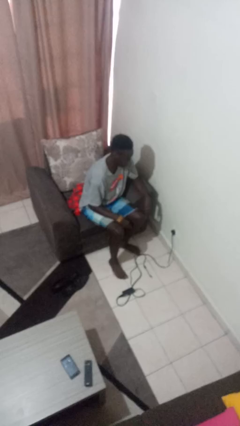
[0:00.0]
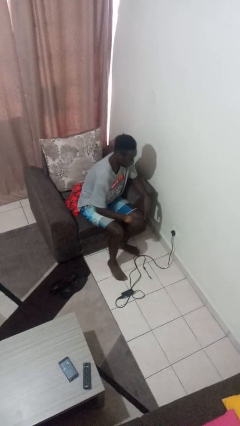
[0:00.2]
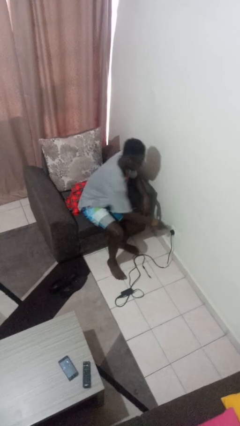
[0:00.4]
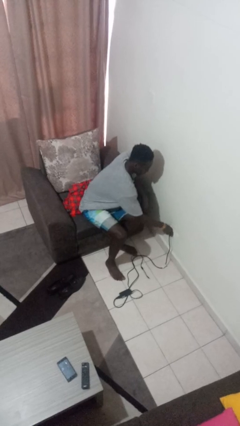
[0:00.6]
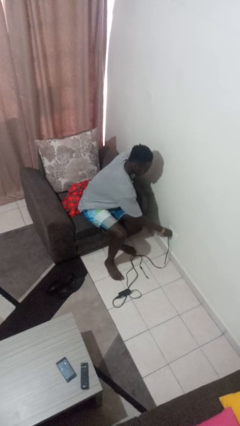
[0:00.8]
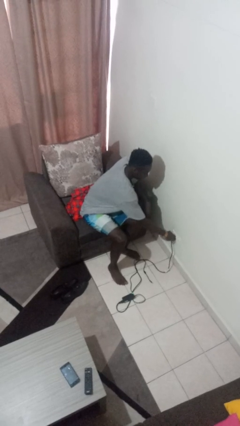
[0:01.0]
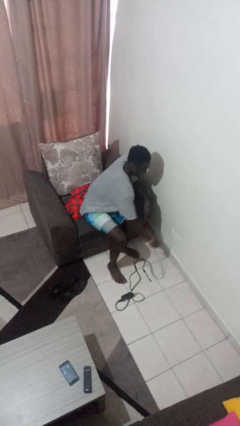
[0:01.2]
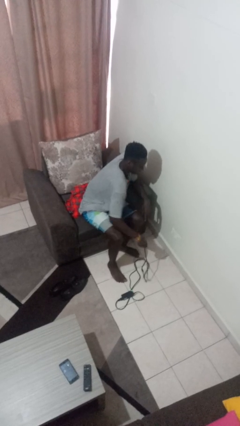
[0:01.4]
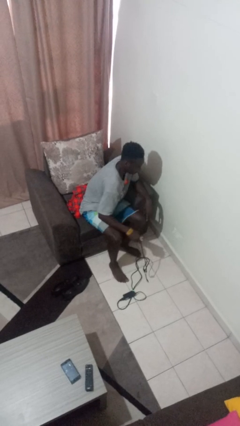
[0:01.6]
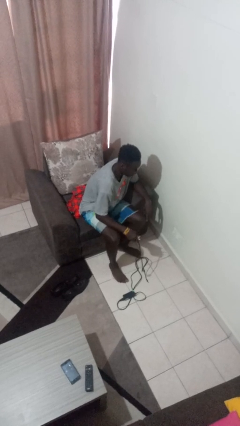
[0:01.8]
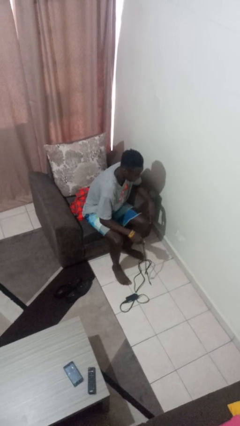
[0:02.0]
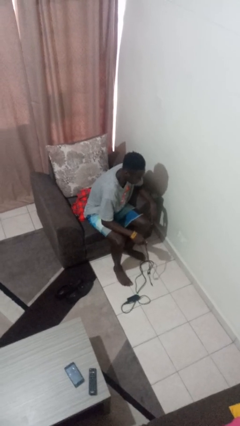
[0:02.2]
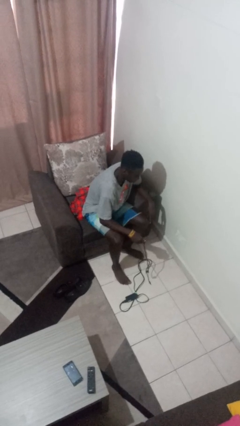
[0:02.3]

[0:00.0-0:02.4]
person unplugs from electrical socket

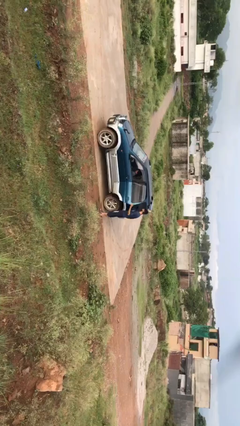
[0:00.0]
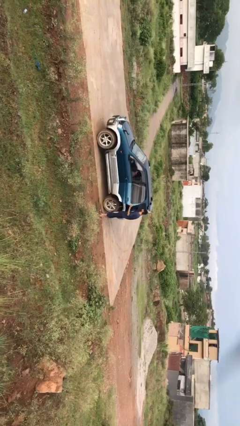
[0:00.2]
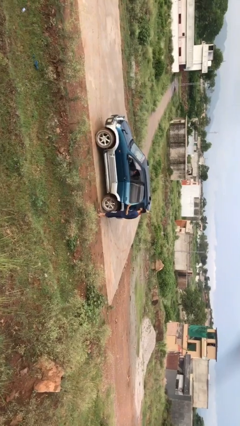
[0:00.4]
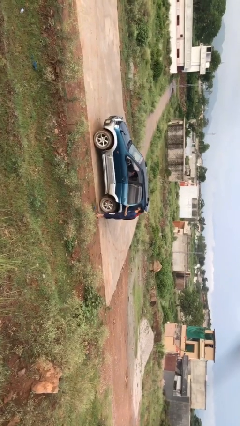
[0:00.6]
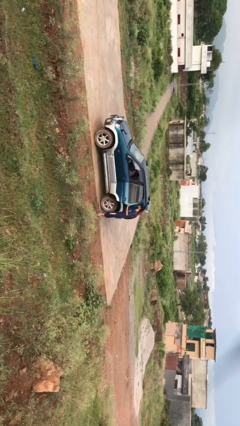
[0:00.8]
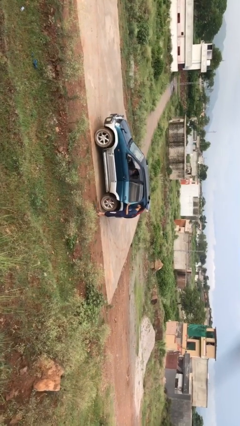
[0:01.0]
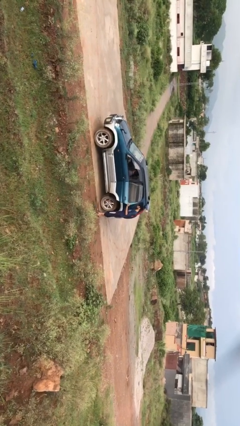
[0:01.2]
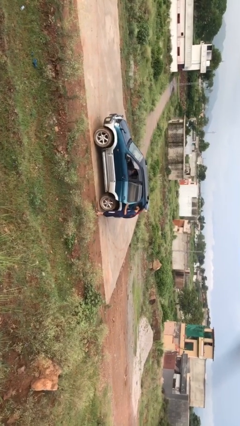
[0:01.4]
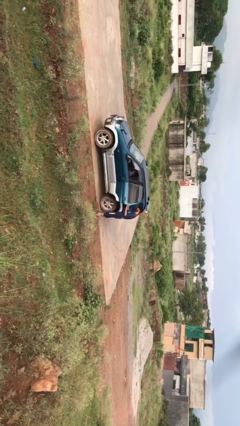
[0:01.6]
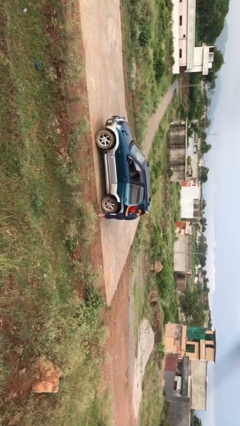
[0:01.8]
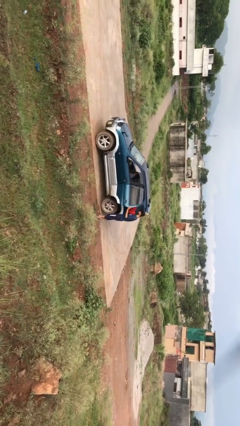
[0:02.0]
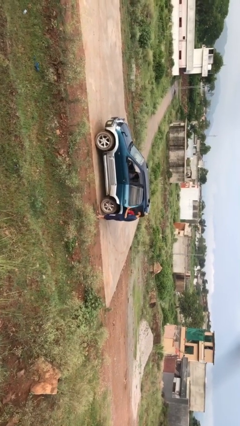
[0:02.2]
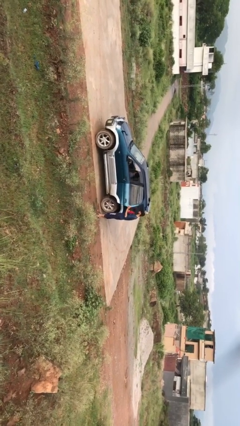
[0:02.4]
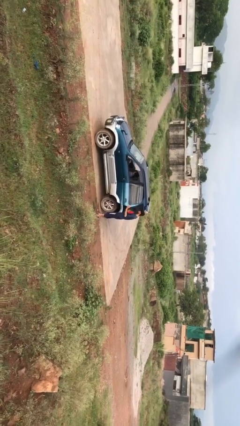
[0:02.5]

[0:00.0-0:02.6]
person unloads car

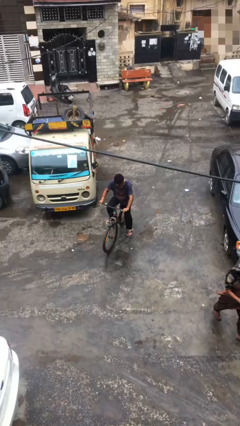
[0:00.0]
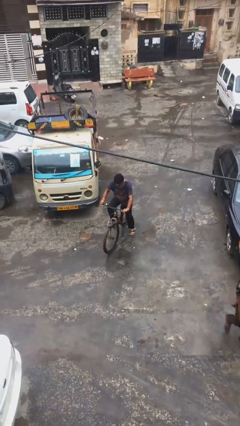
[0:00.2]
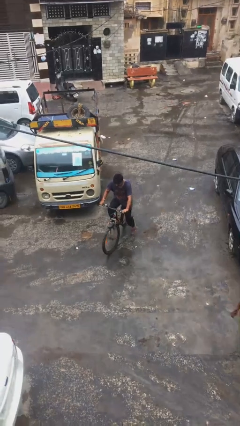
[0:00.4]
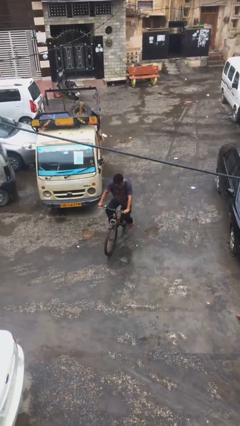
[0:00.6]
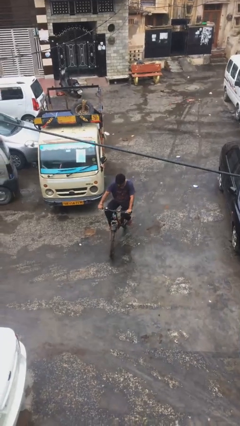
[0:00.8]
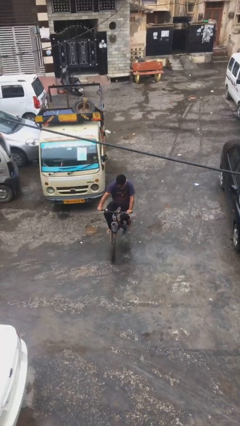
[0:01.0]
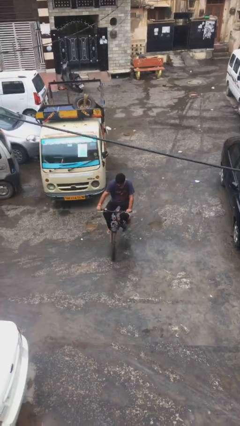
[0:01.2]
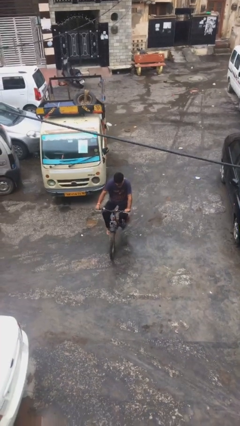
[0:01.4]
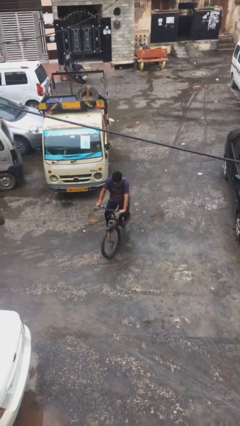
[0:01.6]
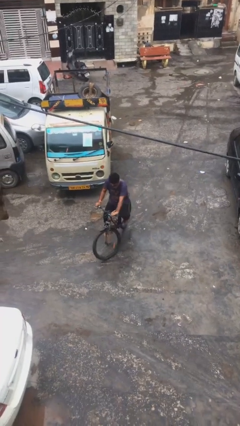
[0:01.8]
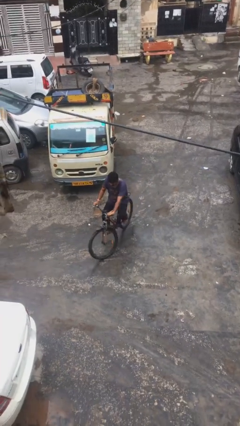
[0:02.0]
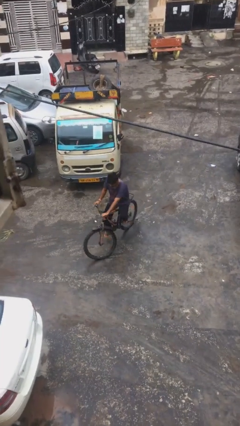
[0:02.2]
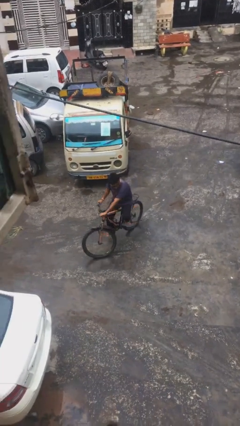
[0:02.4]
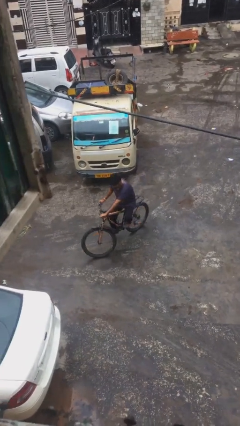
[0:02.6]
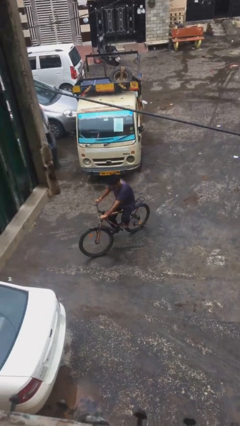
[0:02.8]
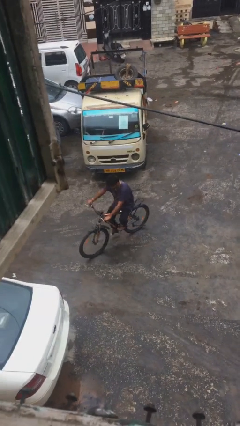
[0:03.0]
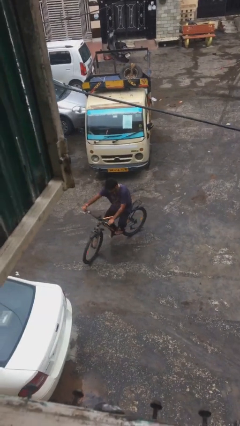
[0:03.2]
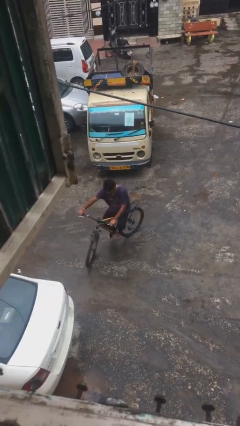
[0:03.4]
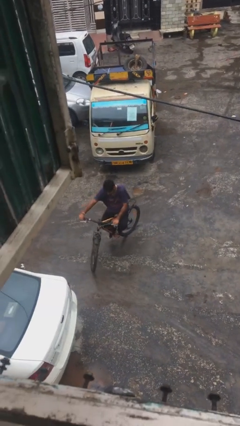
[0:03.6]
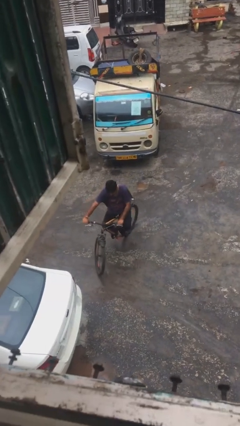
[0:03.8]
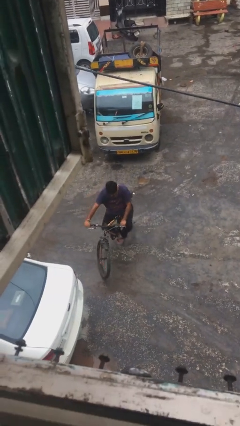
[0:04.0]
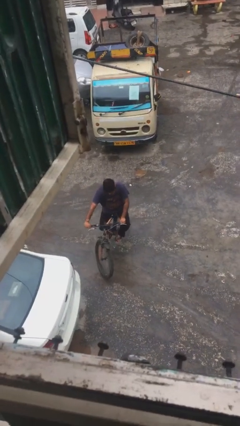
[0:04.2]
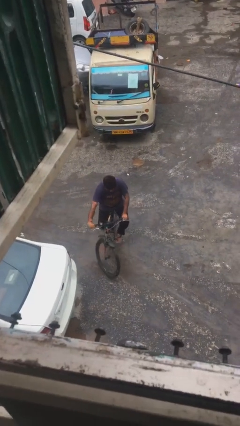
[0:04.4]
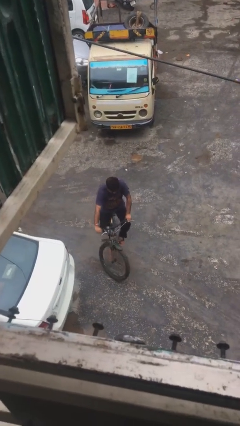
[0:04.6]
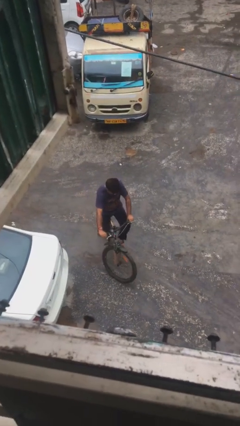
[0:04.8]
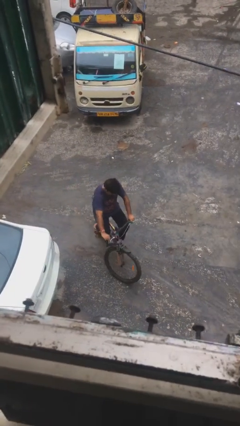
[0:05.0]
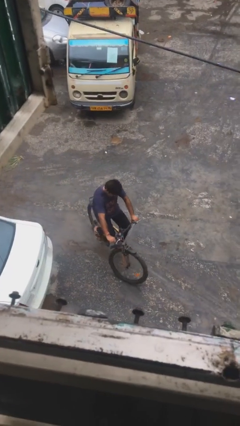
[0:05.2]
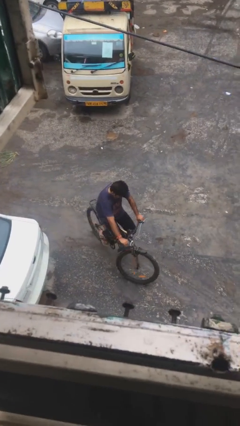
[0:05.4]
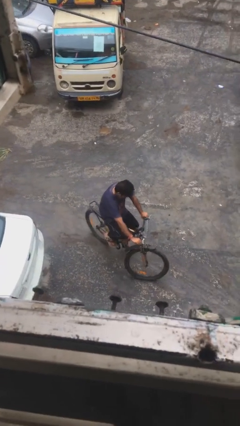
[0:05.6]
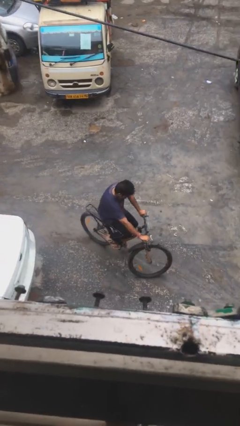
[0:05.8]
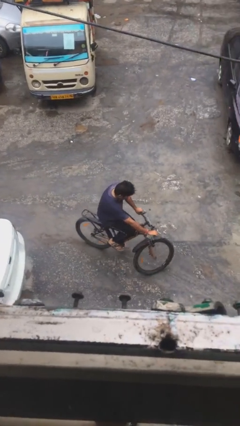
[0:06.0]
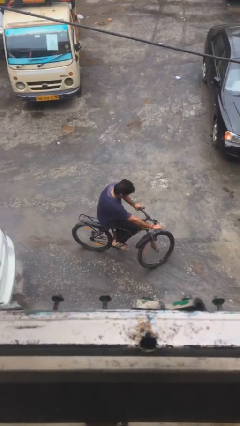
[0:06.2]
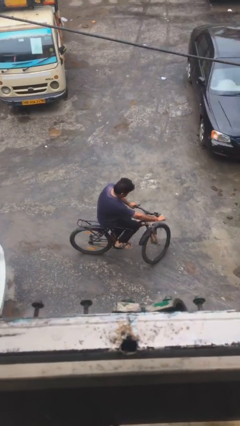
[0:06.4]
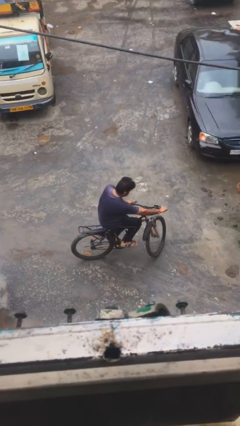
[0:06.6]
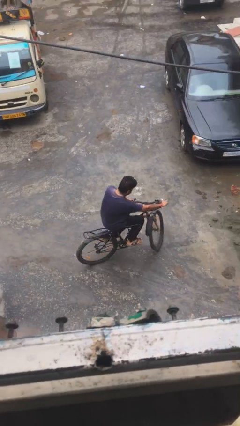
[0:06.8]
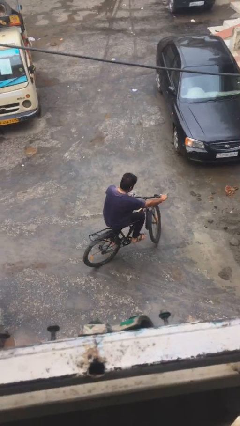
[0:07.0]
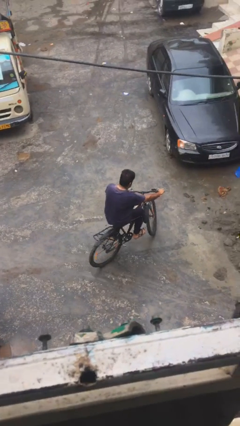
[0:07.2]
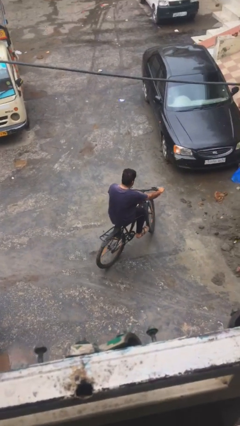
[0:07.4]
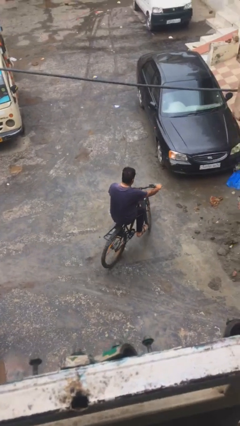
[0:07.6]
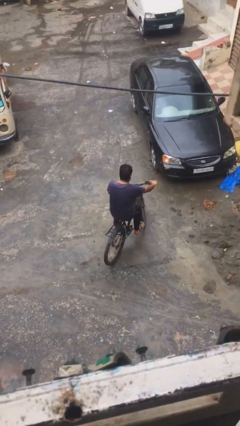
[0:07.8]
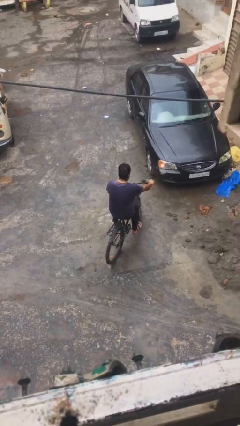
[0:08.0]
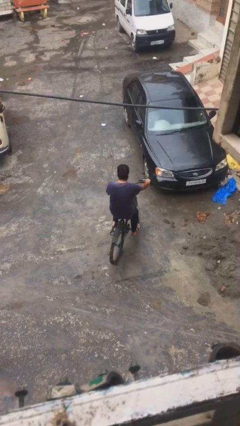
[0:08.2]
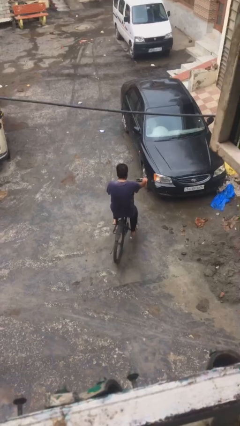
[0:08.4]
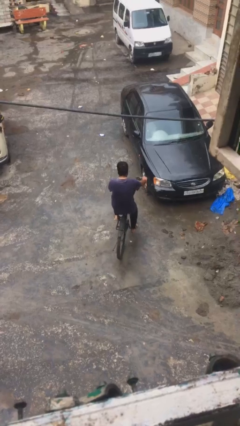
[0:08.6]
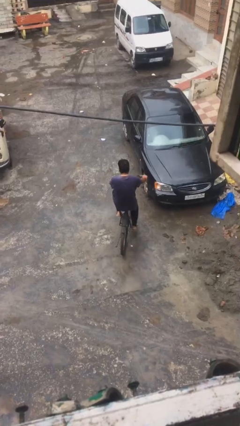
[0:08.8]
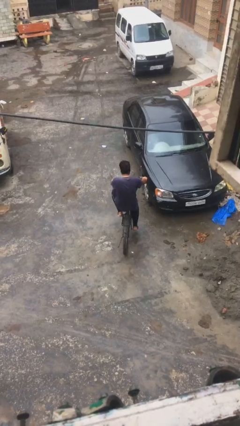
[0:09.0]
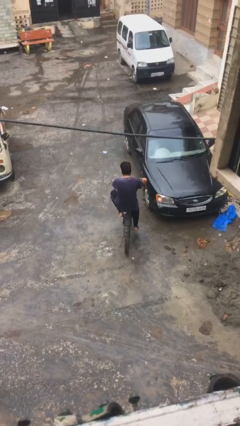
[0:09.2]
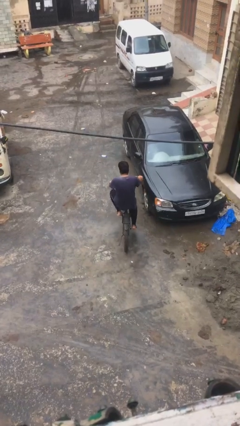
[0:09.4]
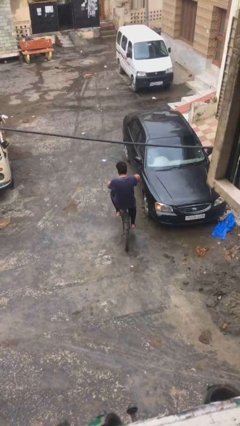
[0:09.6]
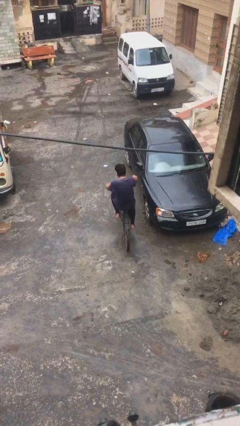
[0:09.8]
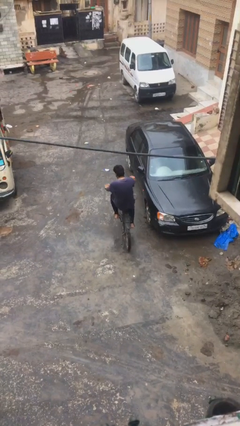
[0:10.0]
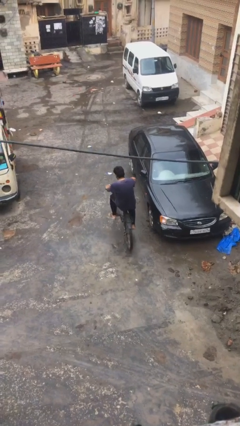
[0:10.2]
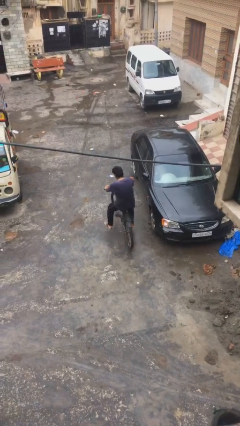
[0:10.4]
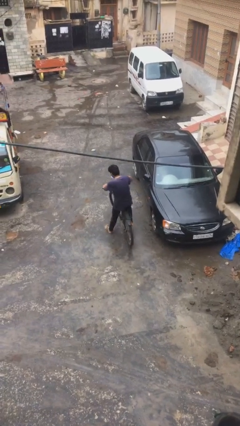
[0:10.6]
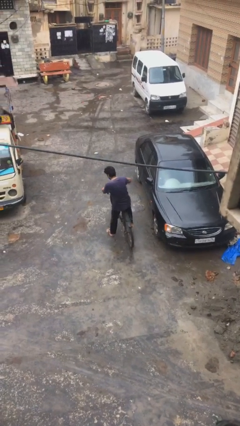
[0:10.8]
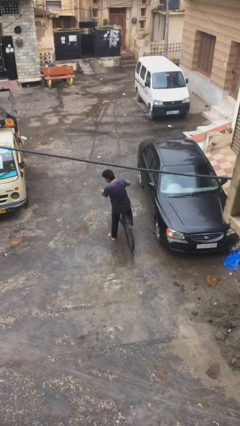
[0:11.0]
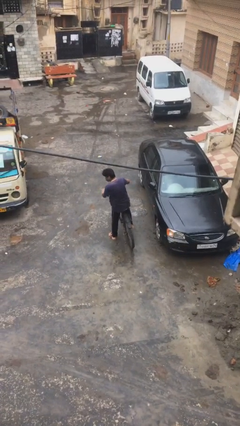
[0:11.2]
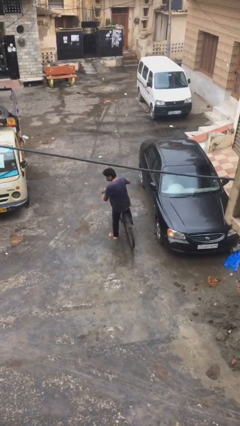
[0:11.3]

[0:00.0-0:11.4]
person rides bicycle

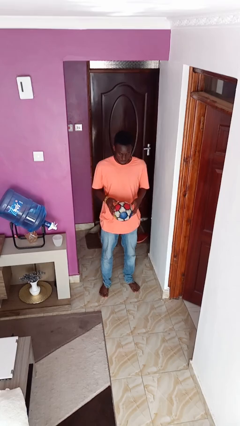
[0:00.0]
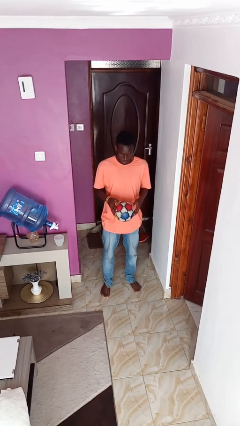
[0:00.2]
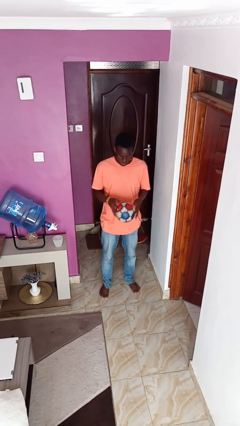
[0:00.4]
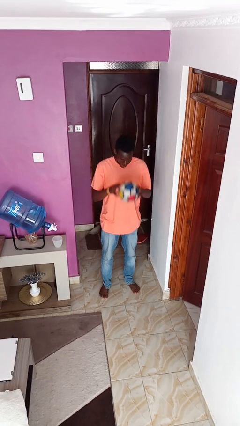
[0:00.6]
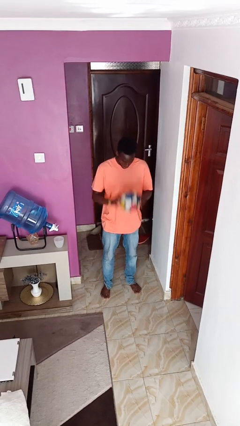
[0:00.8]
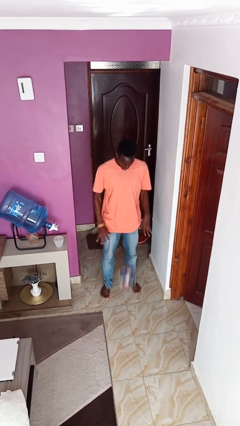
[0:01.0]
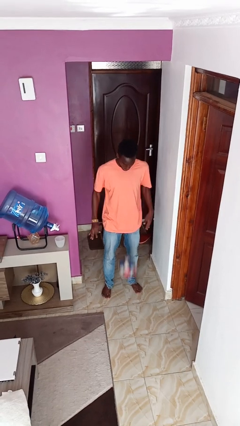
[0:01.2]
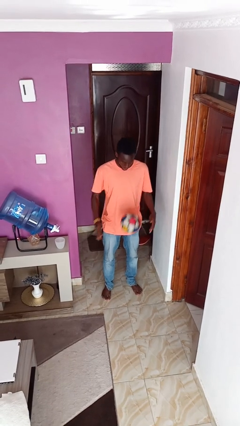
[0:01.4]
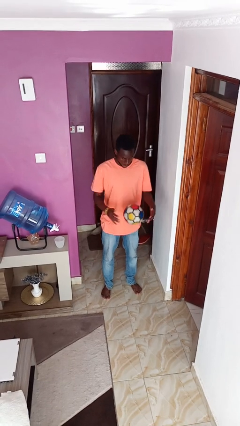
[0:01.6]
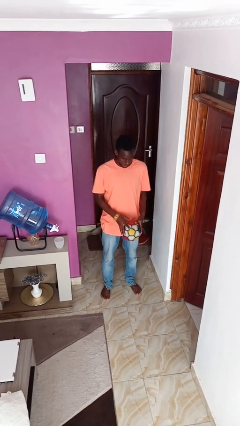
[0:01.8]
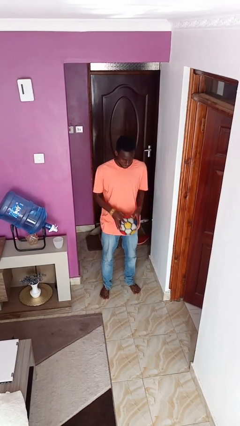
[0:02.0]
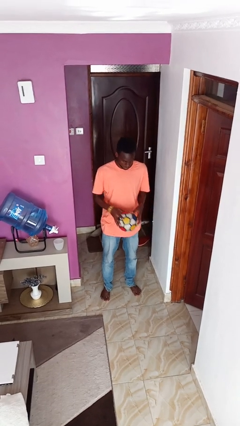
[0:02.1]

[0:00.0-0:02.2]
person bounces ball on floor
